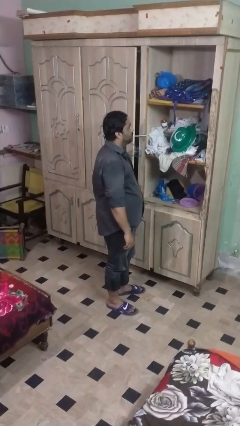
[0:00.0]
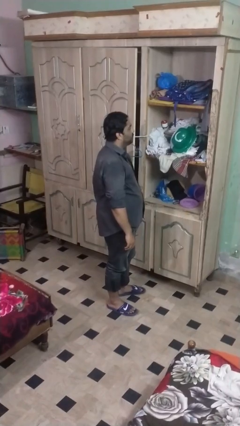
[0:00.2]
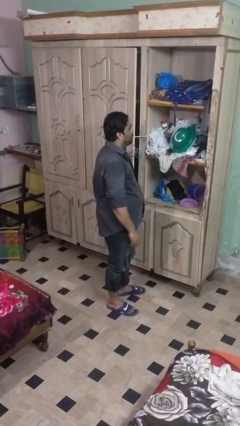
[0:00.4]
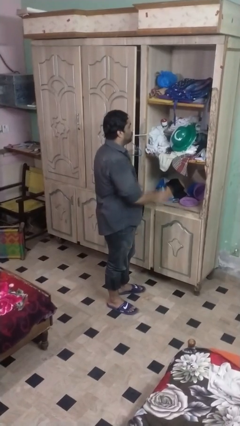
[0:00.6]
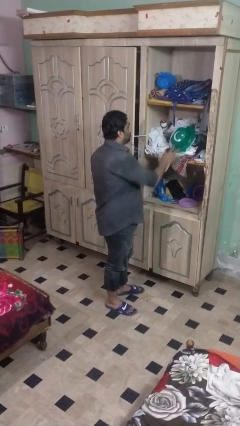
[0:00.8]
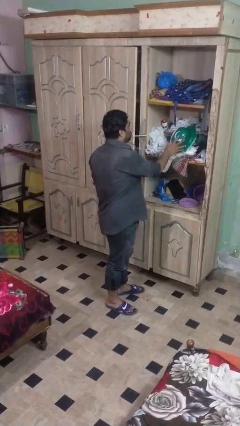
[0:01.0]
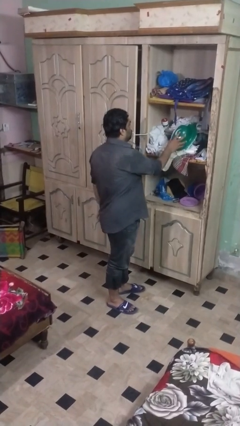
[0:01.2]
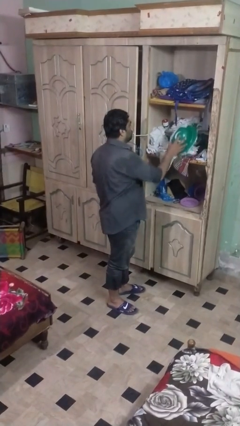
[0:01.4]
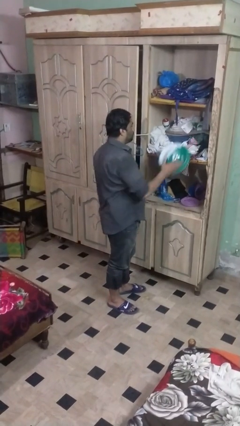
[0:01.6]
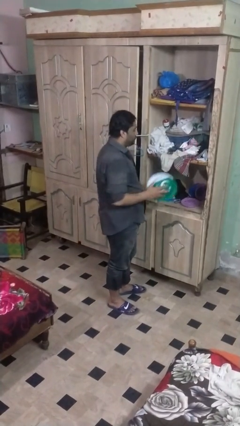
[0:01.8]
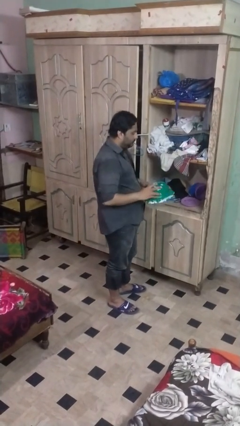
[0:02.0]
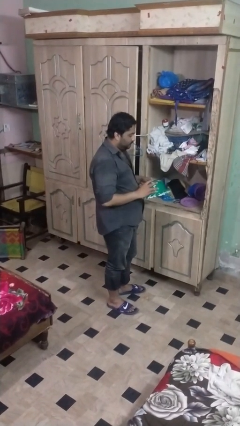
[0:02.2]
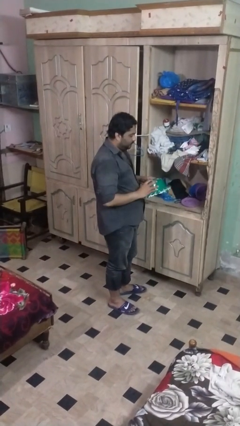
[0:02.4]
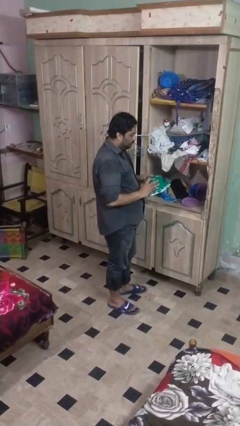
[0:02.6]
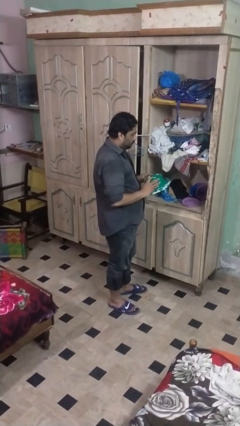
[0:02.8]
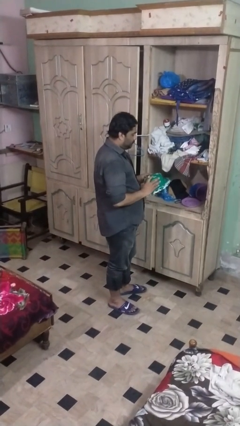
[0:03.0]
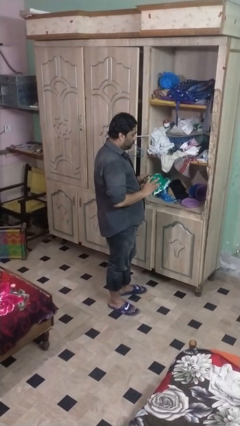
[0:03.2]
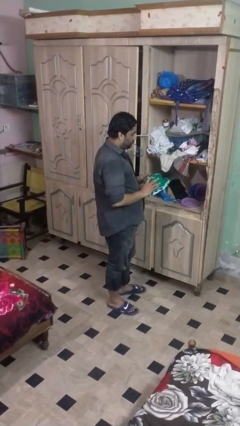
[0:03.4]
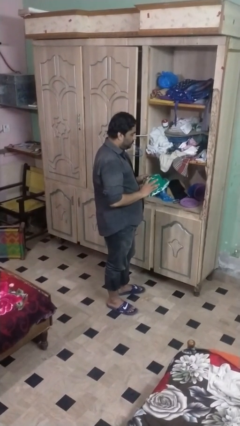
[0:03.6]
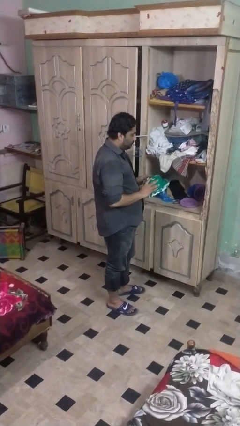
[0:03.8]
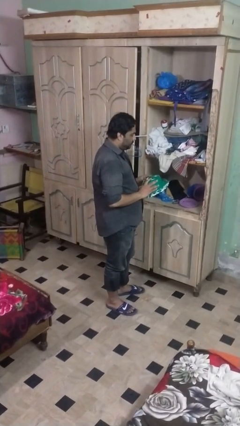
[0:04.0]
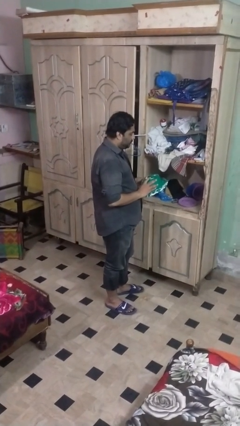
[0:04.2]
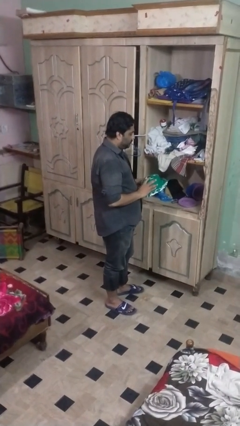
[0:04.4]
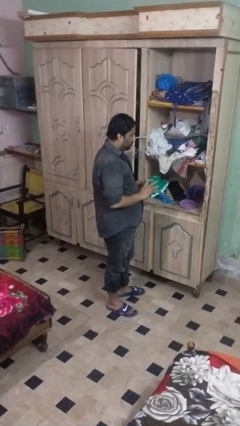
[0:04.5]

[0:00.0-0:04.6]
person picks up object from shelf

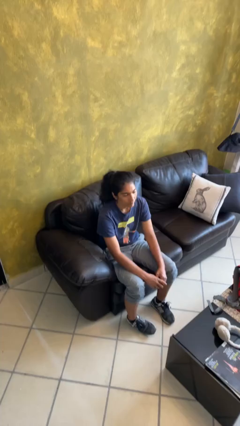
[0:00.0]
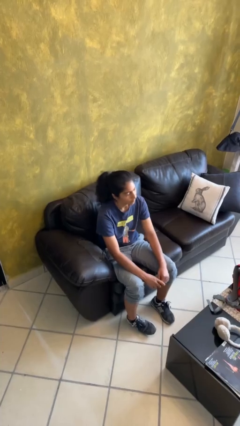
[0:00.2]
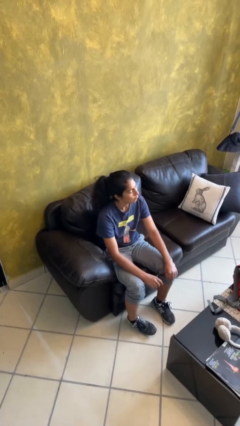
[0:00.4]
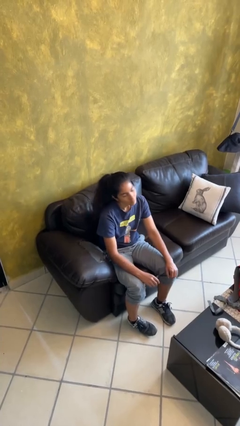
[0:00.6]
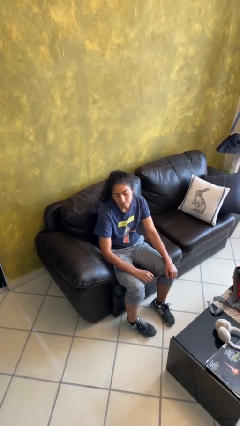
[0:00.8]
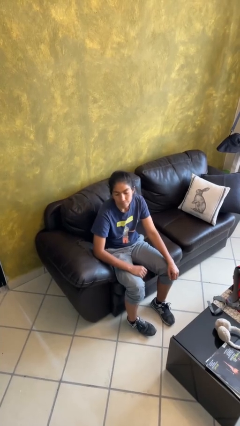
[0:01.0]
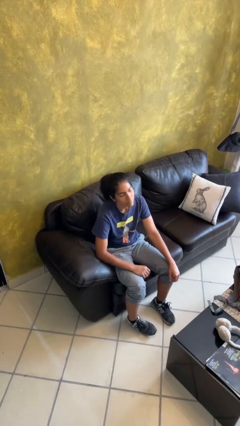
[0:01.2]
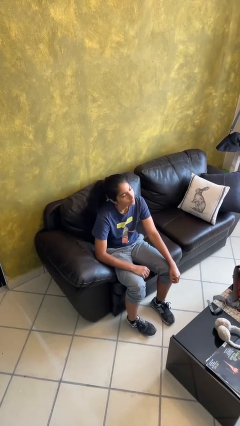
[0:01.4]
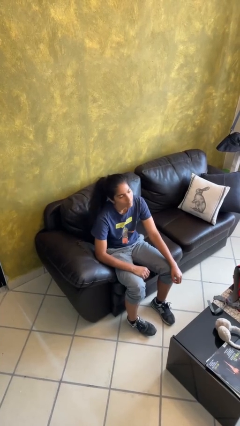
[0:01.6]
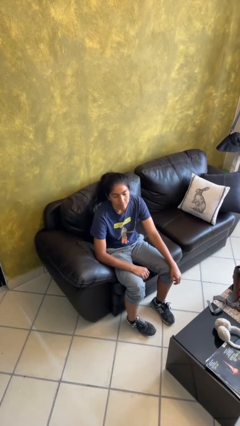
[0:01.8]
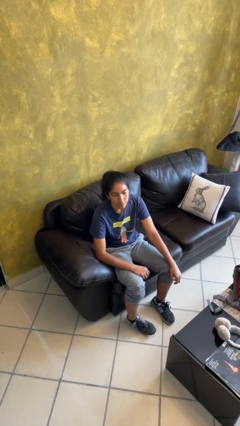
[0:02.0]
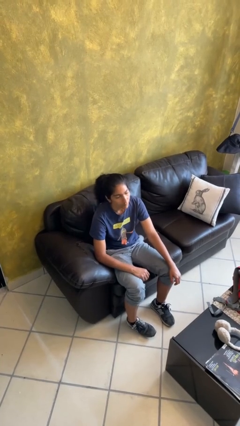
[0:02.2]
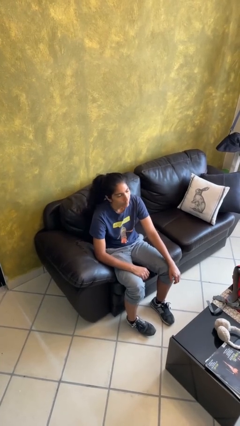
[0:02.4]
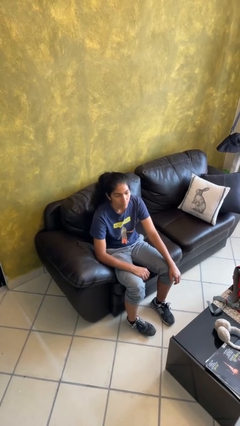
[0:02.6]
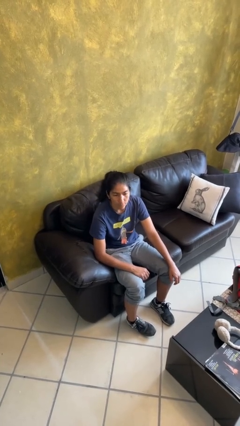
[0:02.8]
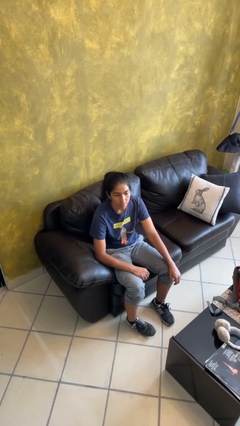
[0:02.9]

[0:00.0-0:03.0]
person shakes head

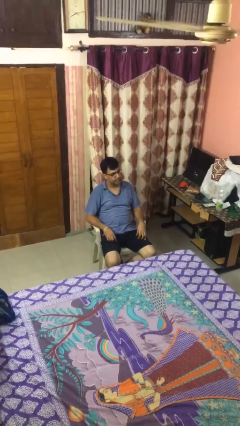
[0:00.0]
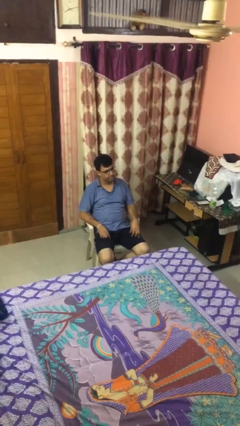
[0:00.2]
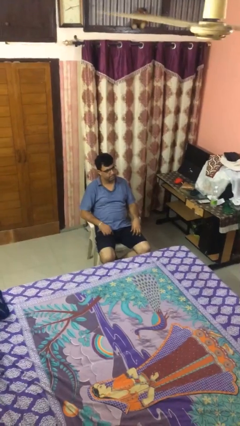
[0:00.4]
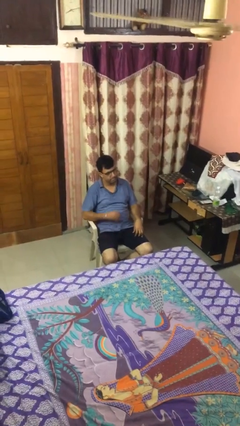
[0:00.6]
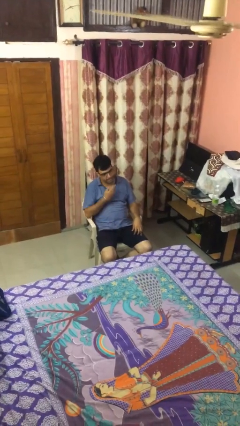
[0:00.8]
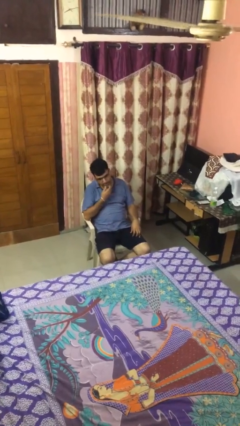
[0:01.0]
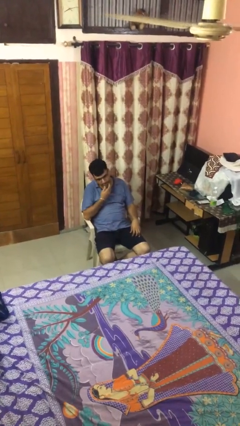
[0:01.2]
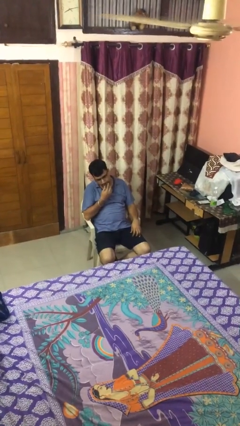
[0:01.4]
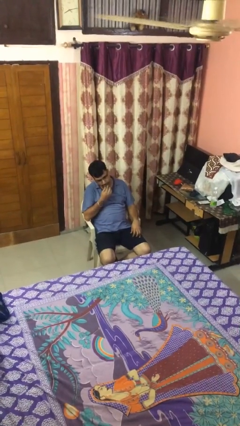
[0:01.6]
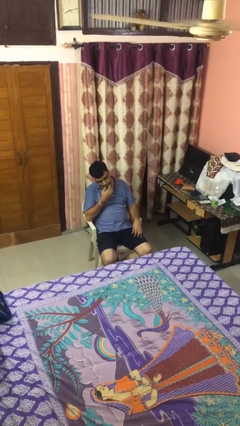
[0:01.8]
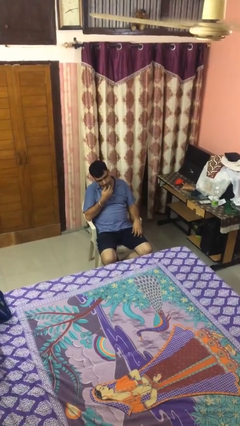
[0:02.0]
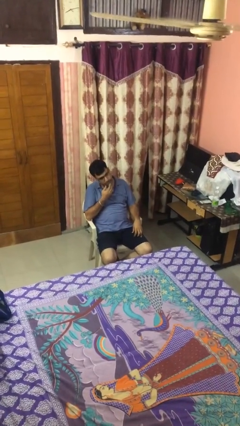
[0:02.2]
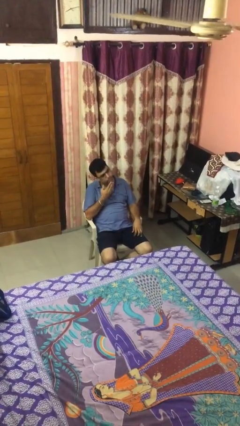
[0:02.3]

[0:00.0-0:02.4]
person strokes chin

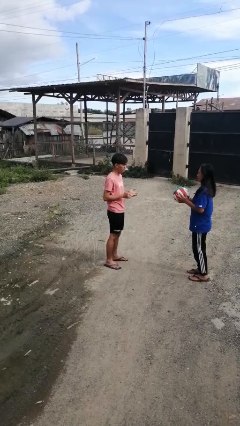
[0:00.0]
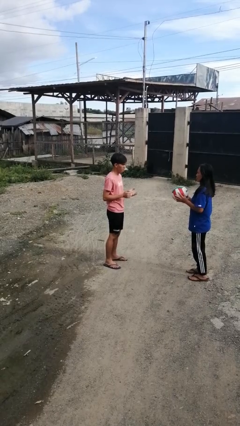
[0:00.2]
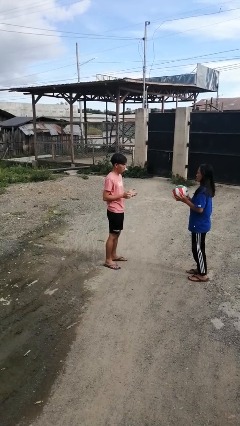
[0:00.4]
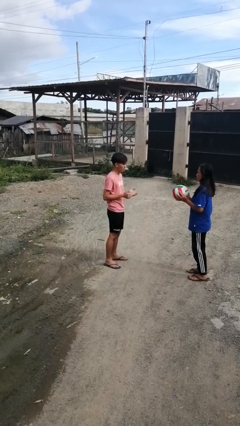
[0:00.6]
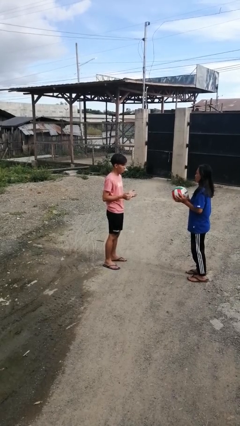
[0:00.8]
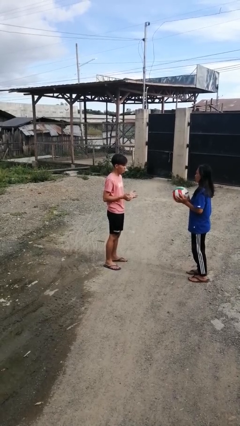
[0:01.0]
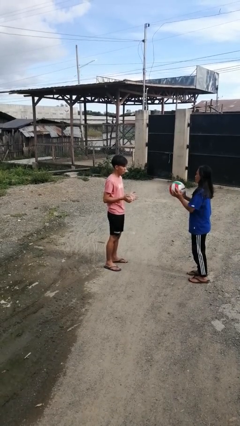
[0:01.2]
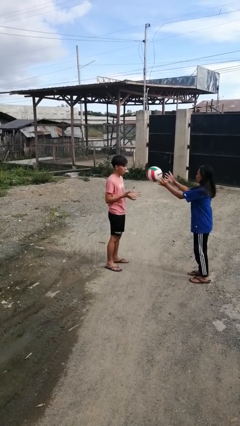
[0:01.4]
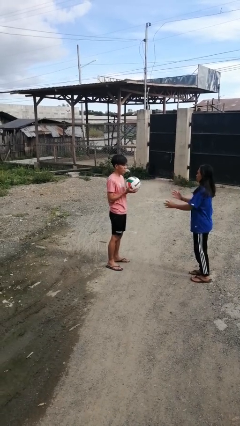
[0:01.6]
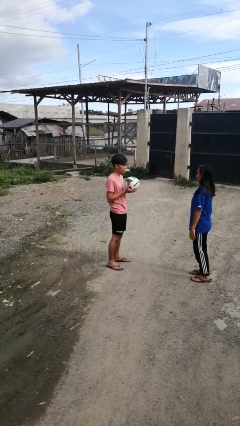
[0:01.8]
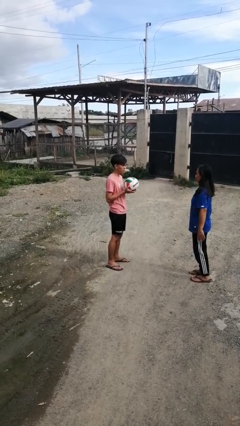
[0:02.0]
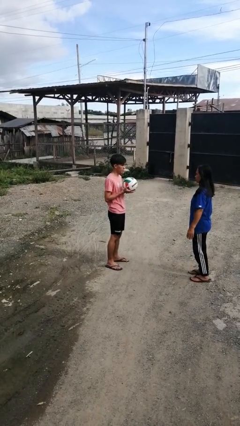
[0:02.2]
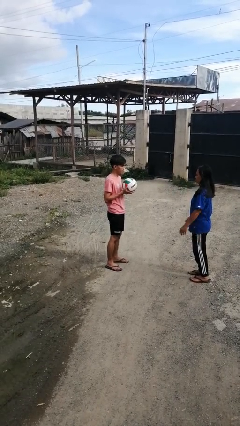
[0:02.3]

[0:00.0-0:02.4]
person catches object from person

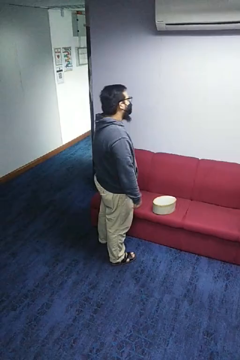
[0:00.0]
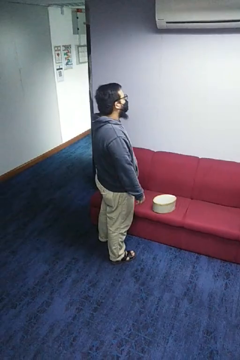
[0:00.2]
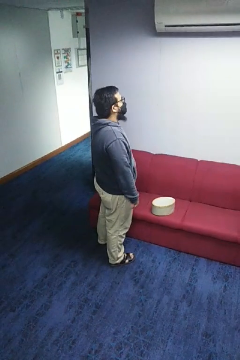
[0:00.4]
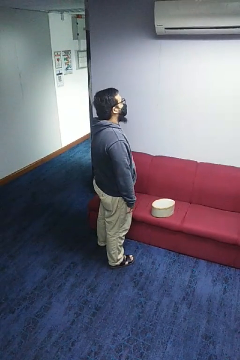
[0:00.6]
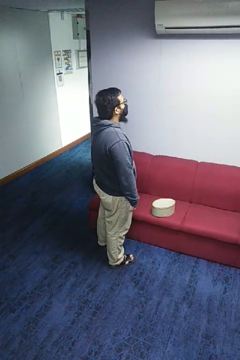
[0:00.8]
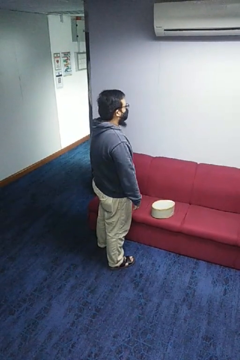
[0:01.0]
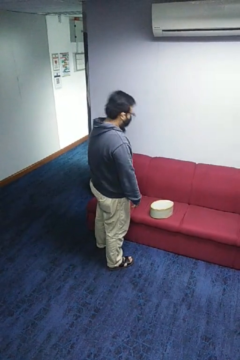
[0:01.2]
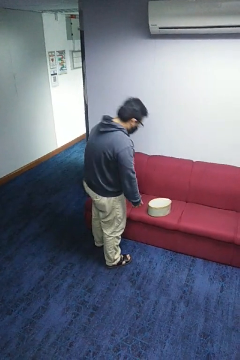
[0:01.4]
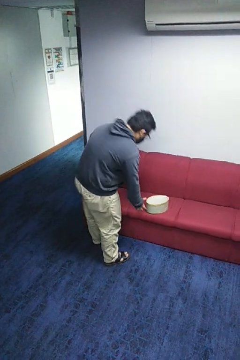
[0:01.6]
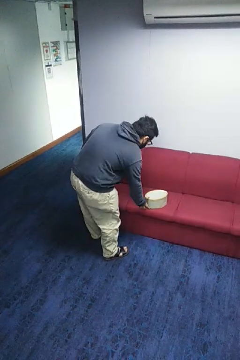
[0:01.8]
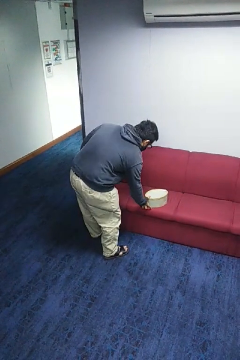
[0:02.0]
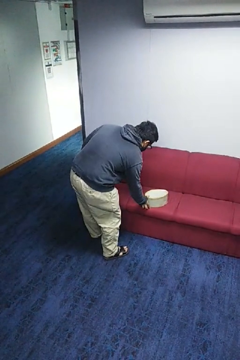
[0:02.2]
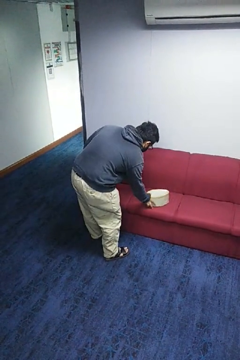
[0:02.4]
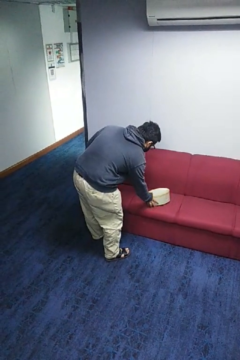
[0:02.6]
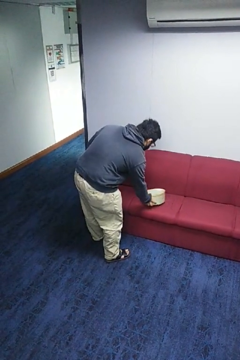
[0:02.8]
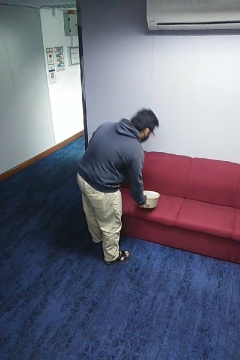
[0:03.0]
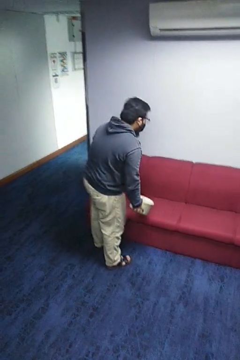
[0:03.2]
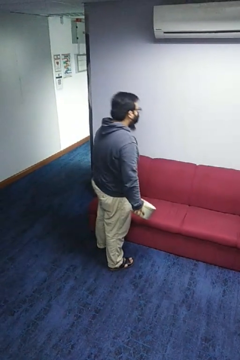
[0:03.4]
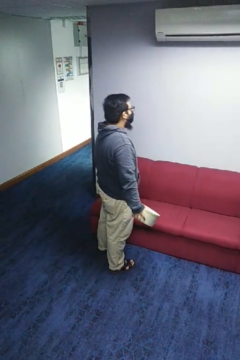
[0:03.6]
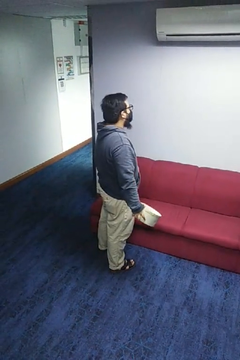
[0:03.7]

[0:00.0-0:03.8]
person picks up object from couch

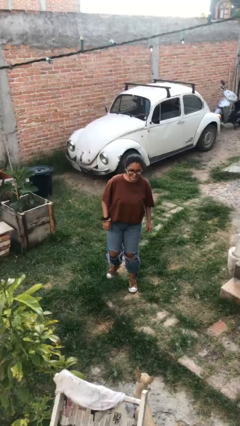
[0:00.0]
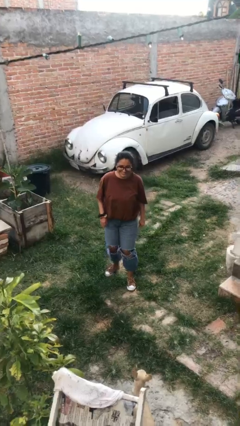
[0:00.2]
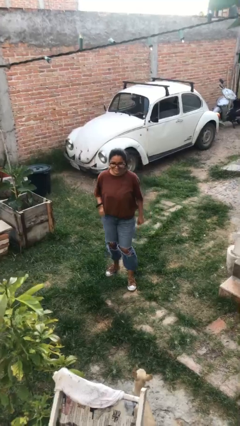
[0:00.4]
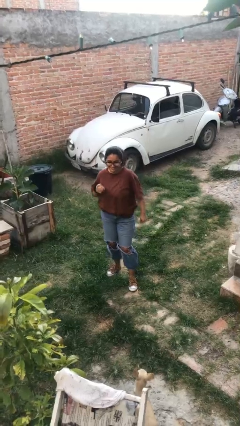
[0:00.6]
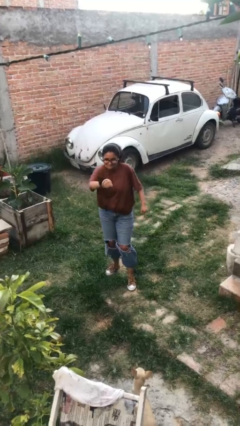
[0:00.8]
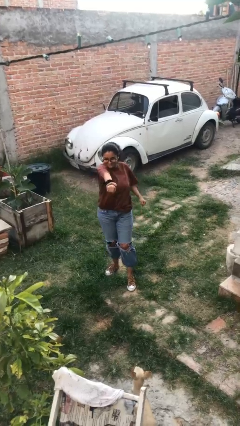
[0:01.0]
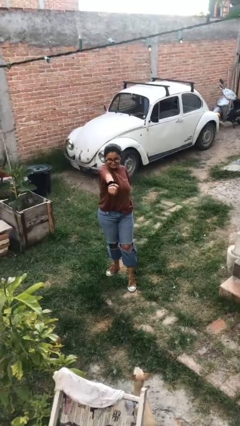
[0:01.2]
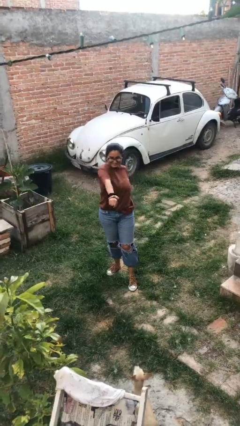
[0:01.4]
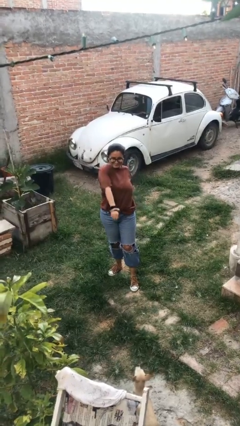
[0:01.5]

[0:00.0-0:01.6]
person karate chop

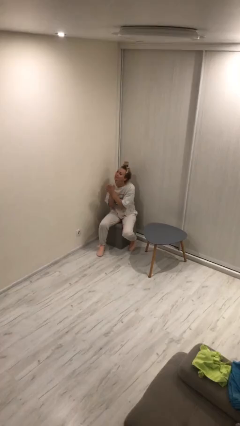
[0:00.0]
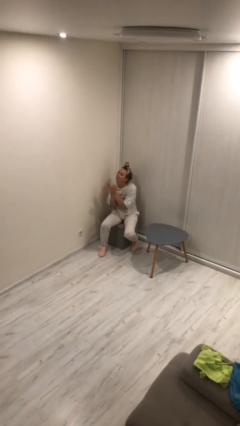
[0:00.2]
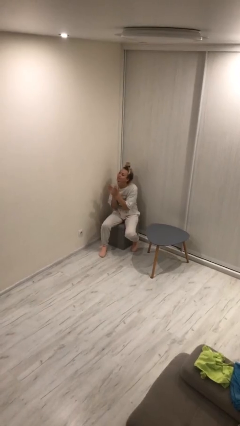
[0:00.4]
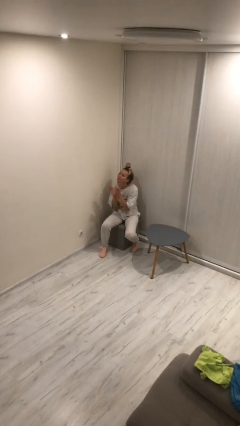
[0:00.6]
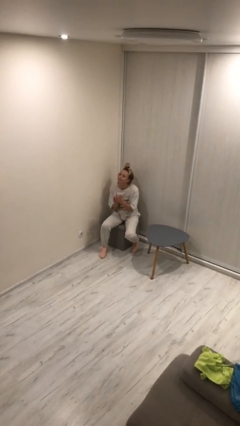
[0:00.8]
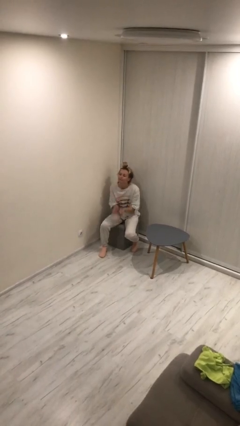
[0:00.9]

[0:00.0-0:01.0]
person claps hands
